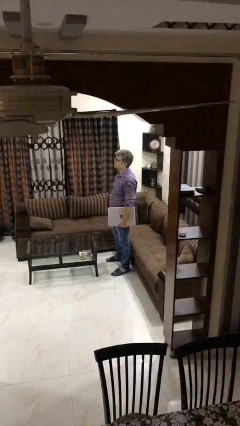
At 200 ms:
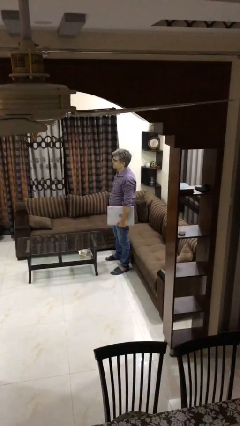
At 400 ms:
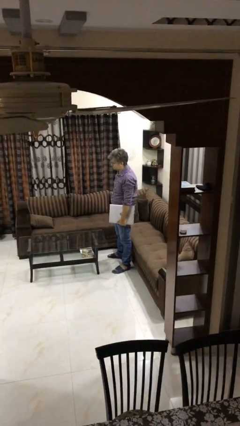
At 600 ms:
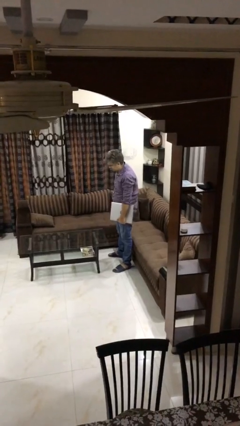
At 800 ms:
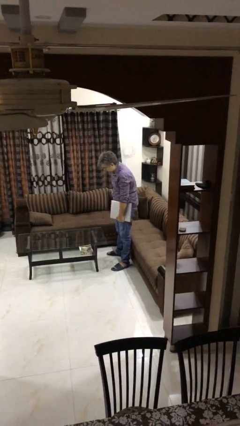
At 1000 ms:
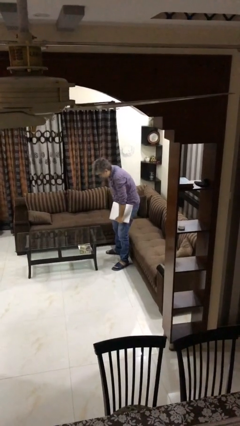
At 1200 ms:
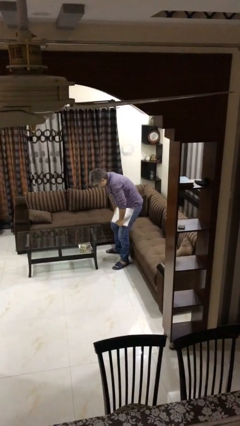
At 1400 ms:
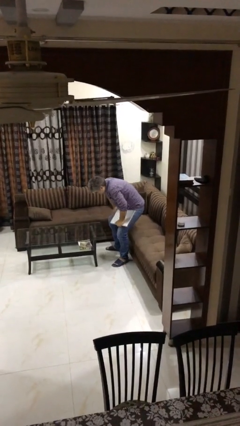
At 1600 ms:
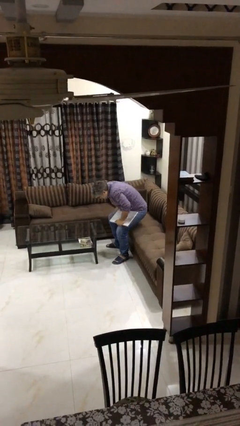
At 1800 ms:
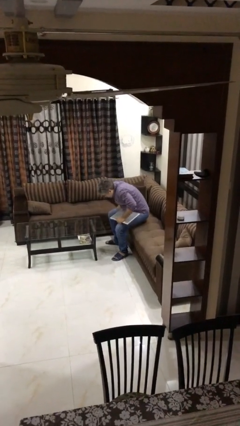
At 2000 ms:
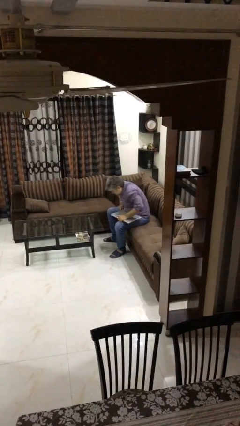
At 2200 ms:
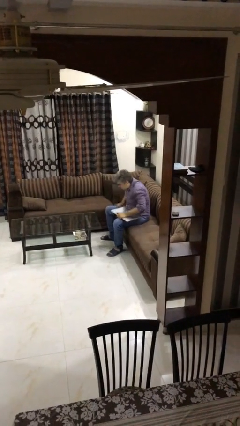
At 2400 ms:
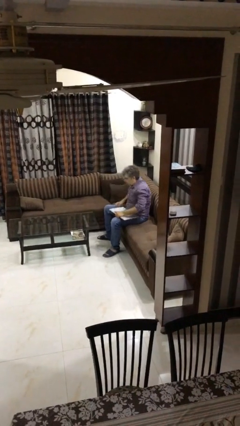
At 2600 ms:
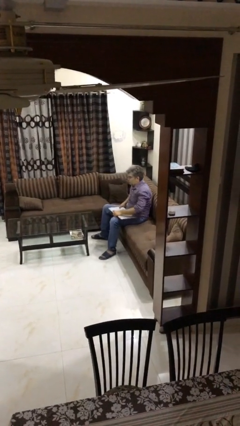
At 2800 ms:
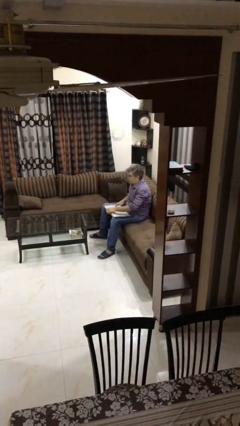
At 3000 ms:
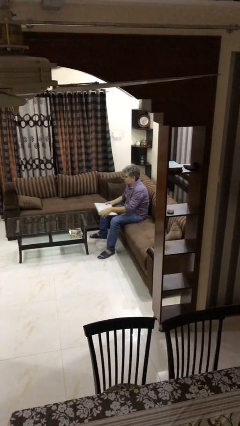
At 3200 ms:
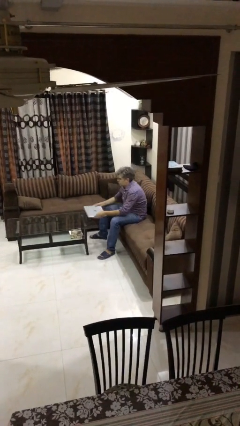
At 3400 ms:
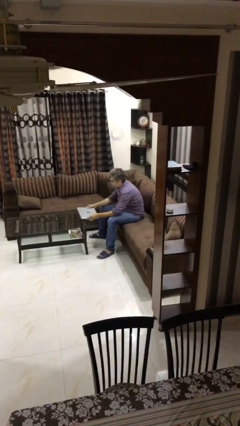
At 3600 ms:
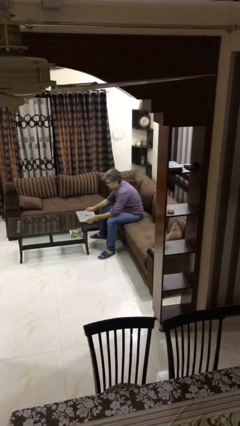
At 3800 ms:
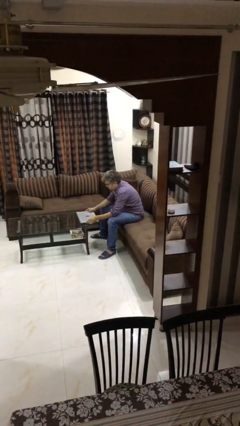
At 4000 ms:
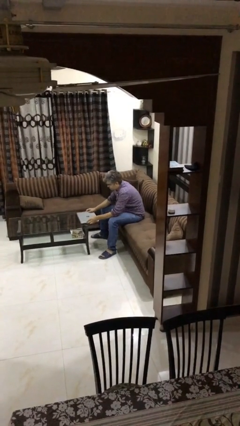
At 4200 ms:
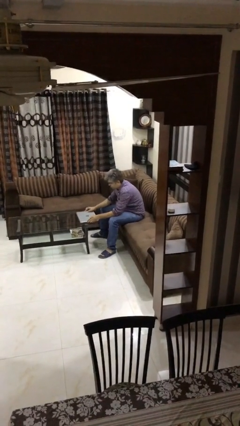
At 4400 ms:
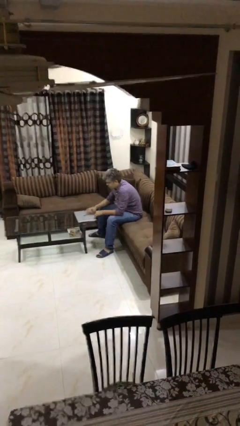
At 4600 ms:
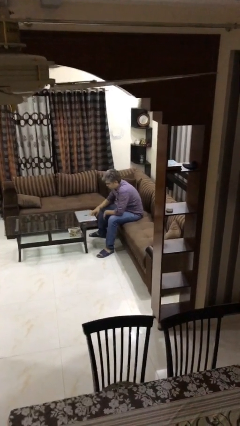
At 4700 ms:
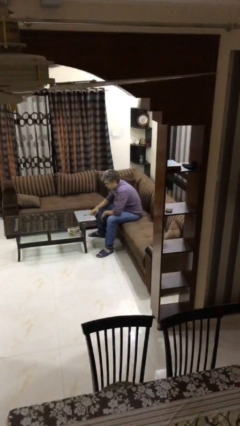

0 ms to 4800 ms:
person sits down

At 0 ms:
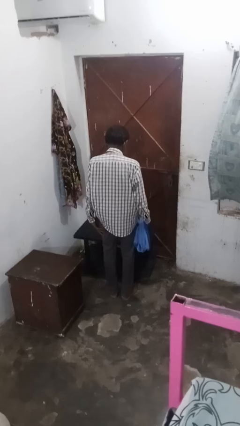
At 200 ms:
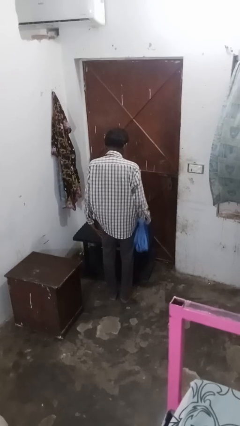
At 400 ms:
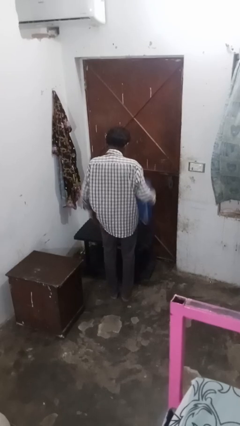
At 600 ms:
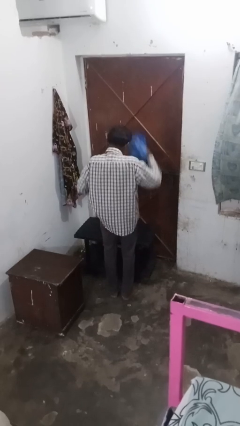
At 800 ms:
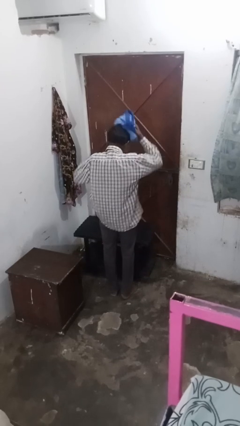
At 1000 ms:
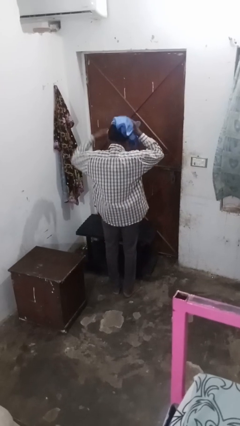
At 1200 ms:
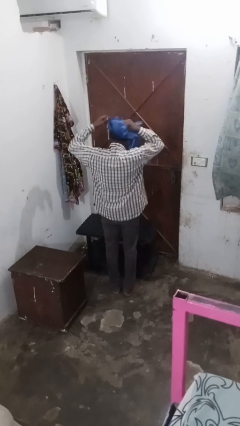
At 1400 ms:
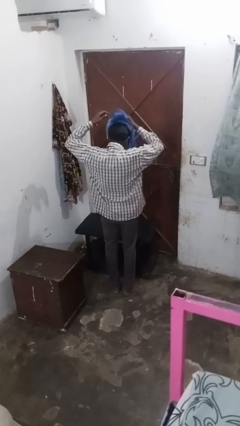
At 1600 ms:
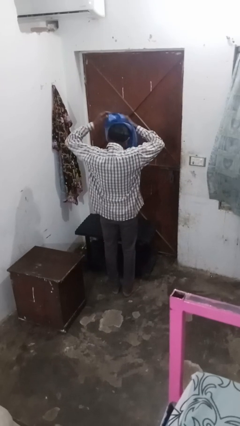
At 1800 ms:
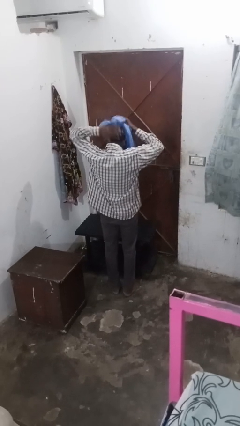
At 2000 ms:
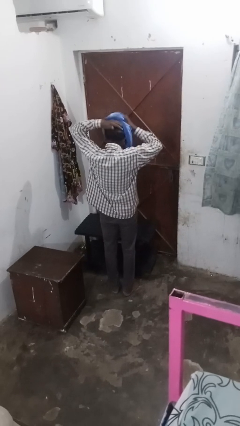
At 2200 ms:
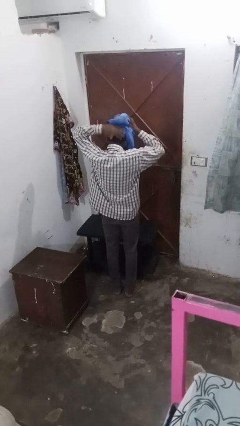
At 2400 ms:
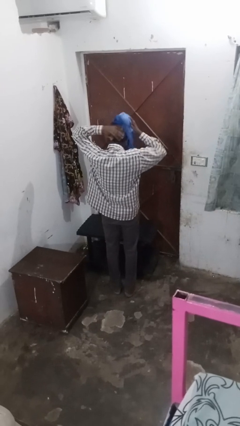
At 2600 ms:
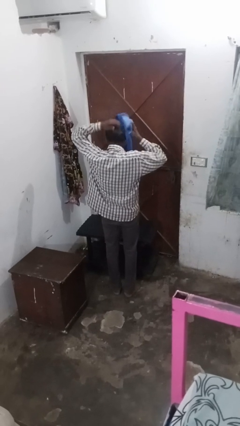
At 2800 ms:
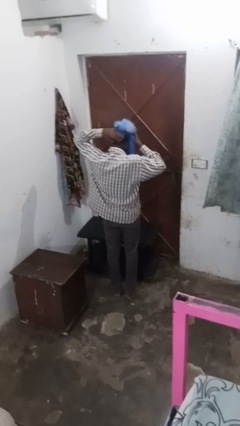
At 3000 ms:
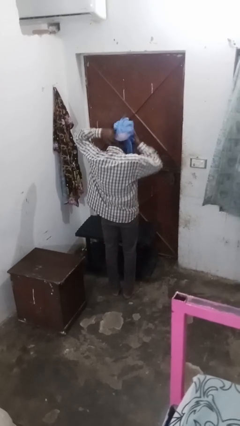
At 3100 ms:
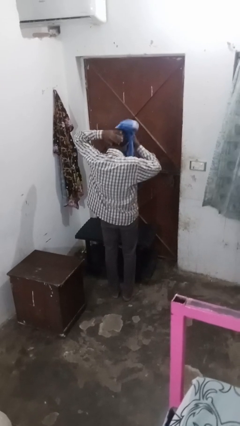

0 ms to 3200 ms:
person dries hair with towel

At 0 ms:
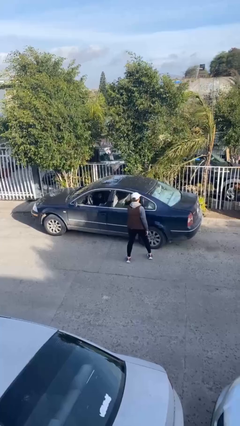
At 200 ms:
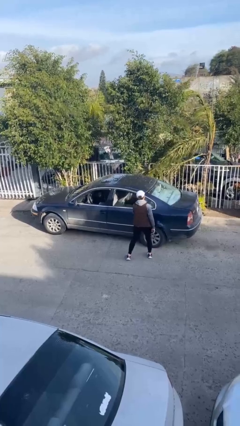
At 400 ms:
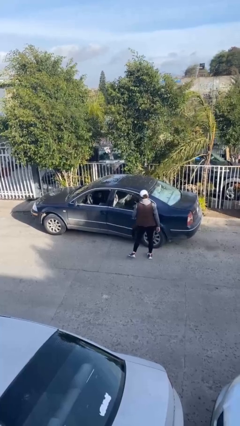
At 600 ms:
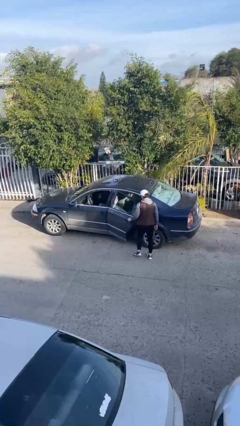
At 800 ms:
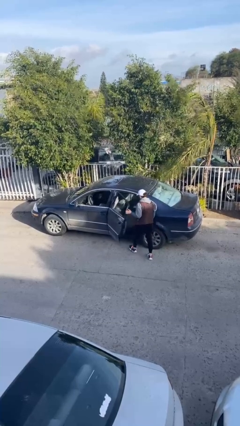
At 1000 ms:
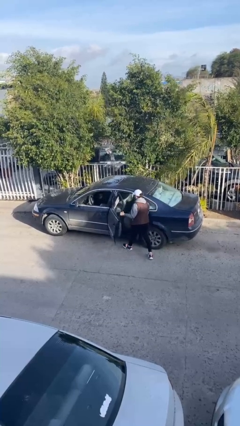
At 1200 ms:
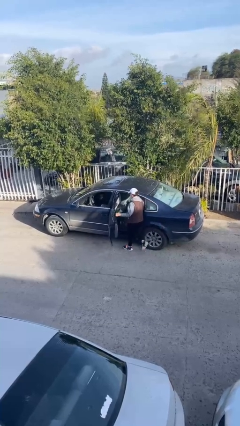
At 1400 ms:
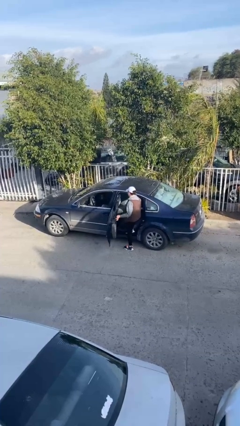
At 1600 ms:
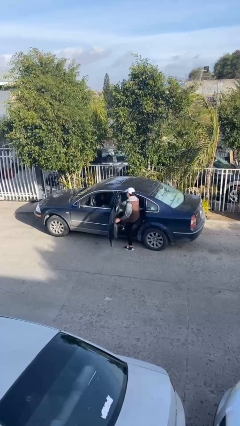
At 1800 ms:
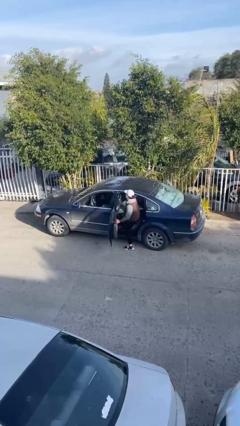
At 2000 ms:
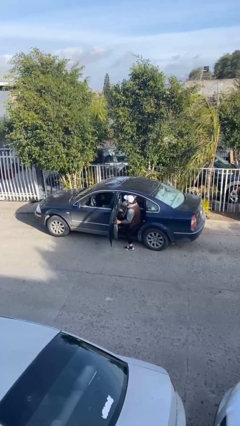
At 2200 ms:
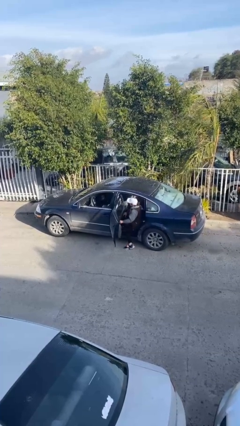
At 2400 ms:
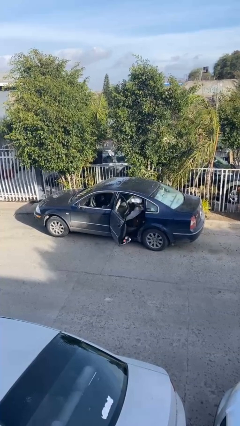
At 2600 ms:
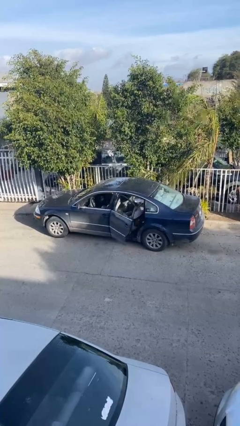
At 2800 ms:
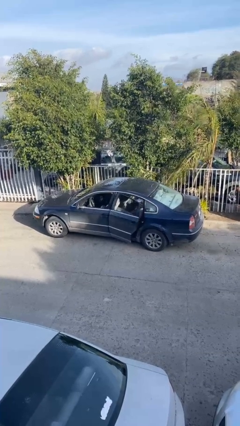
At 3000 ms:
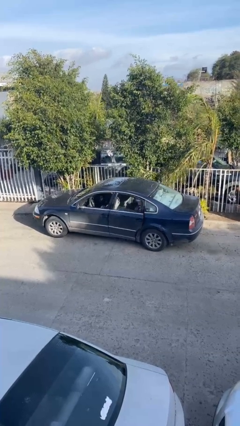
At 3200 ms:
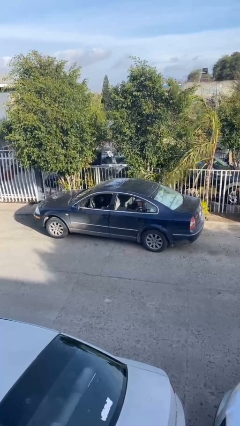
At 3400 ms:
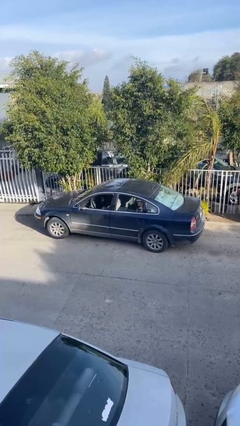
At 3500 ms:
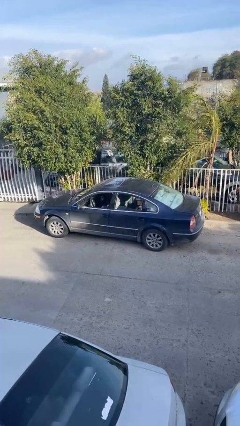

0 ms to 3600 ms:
car picks up person

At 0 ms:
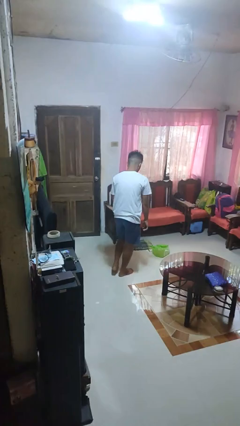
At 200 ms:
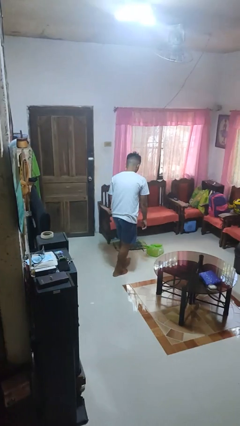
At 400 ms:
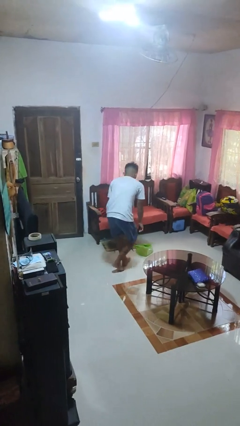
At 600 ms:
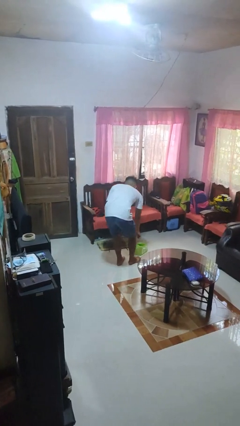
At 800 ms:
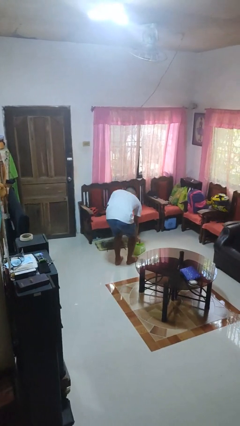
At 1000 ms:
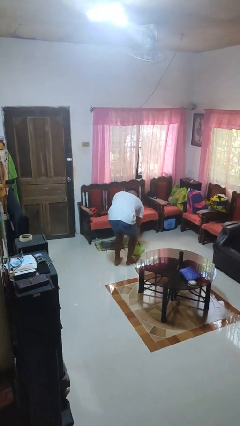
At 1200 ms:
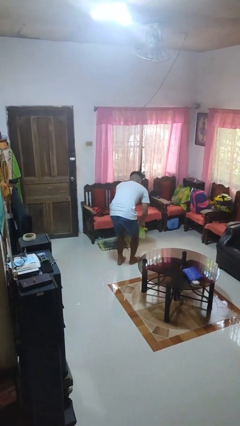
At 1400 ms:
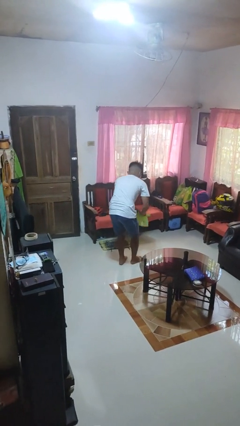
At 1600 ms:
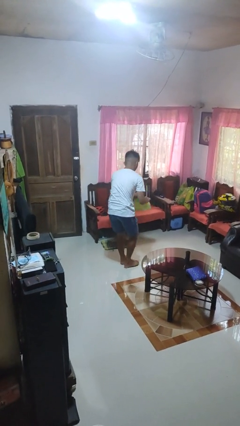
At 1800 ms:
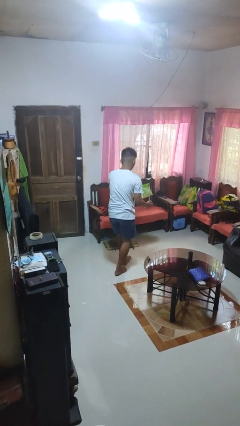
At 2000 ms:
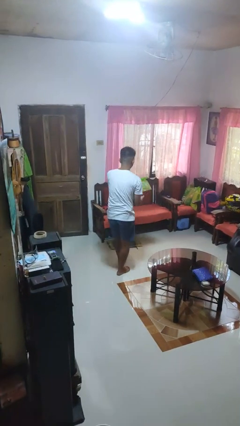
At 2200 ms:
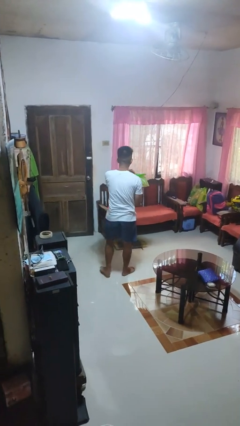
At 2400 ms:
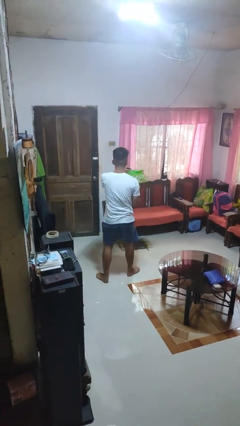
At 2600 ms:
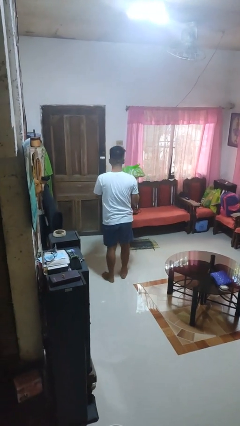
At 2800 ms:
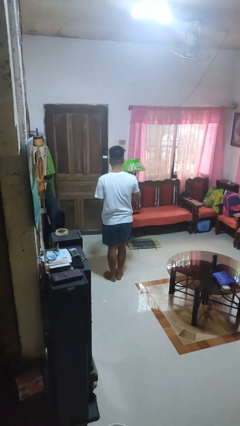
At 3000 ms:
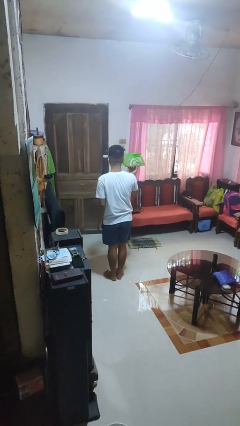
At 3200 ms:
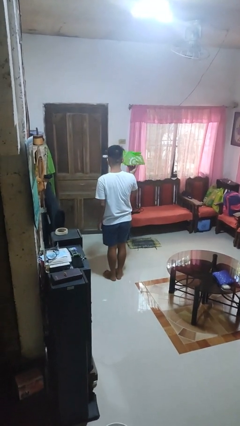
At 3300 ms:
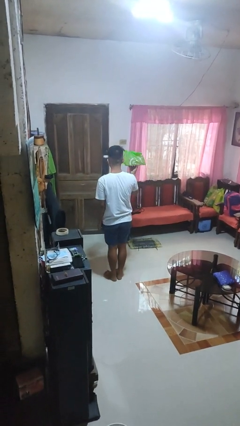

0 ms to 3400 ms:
person picks up object from floor

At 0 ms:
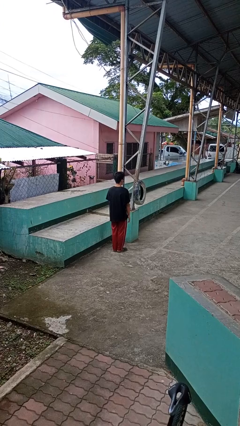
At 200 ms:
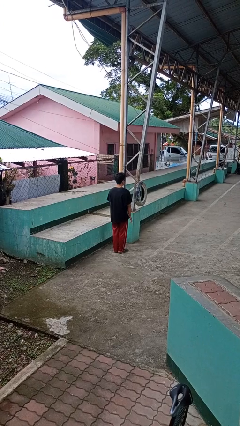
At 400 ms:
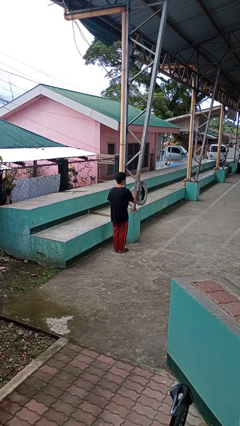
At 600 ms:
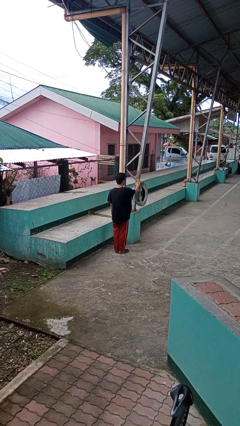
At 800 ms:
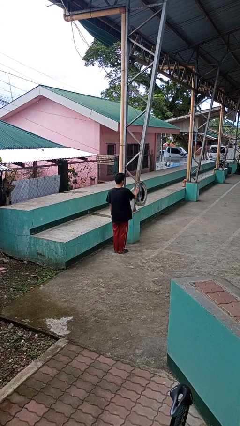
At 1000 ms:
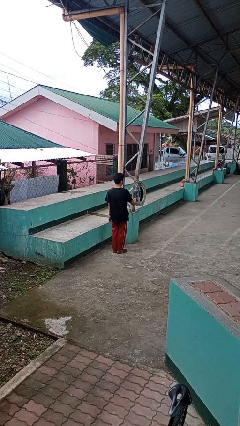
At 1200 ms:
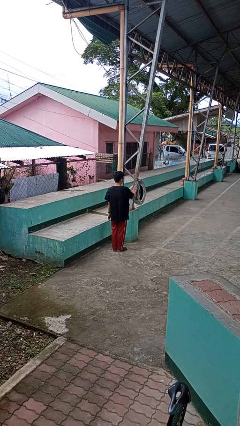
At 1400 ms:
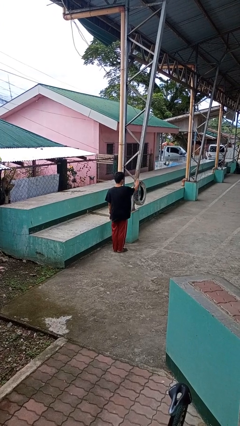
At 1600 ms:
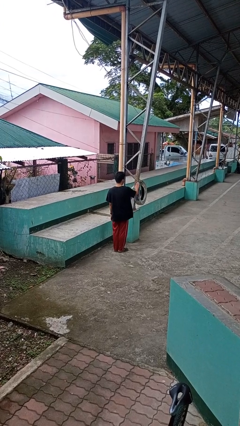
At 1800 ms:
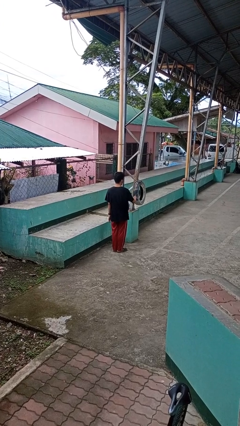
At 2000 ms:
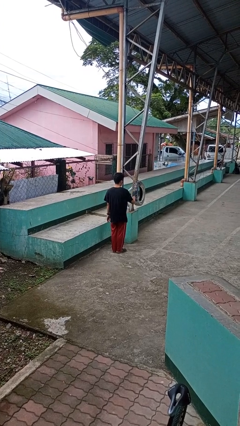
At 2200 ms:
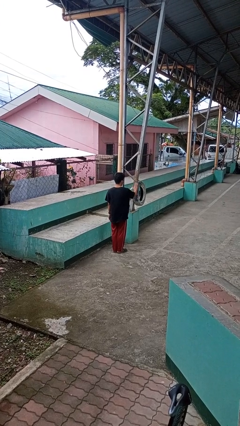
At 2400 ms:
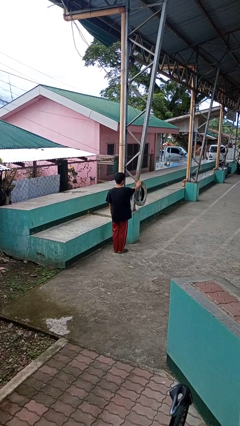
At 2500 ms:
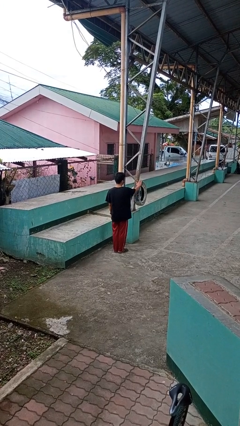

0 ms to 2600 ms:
person waves hand over object
